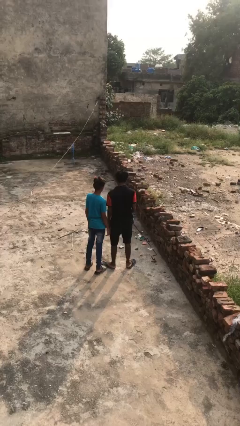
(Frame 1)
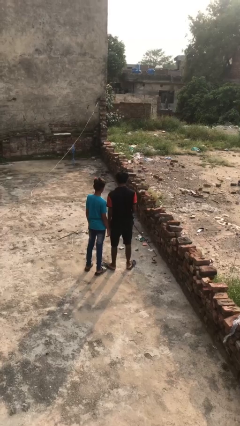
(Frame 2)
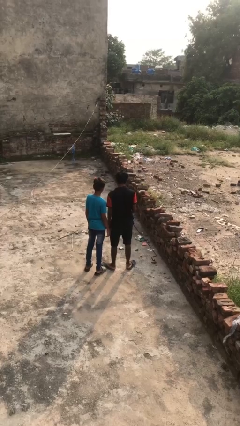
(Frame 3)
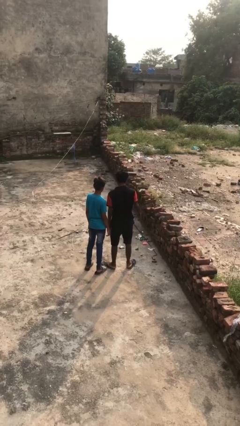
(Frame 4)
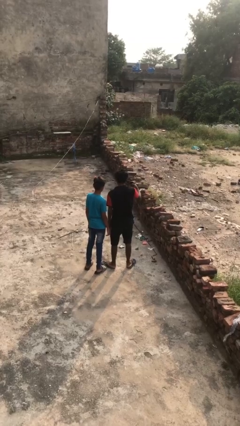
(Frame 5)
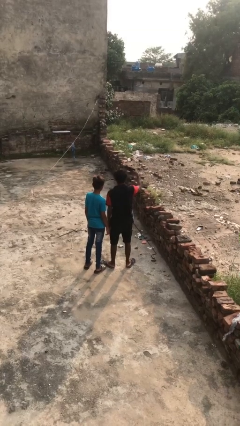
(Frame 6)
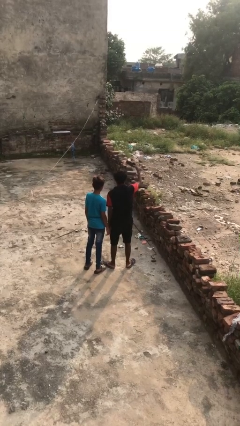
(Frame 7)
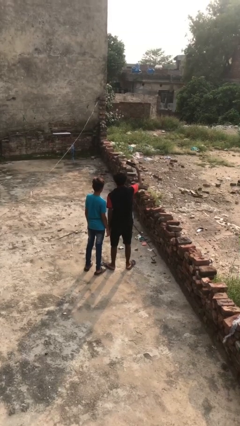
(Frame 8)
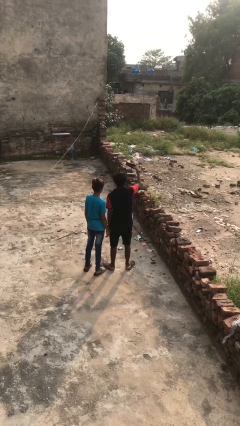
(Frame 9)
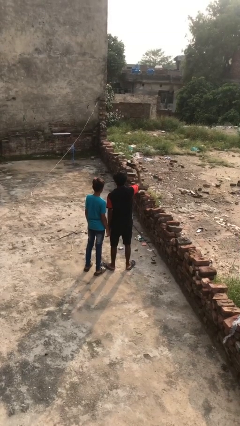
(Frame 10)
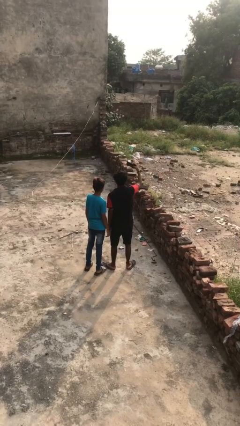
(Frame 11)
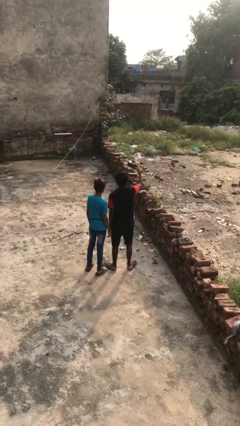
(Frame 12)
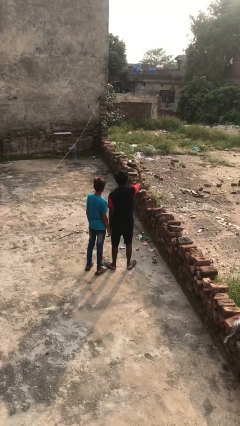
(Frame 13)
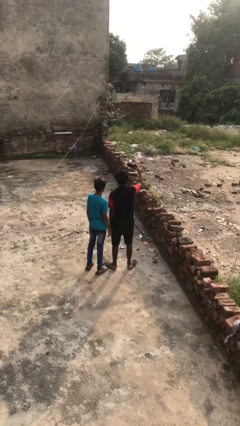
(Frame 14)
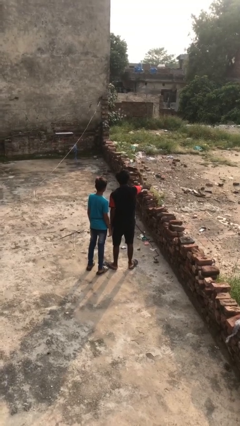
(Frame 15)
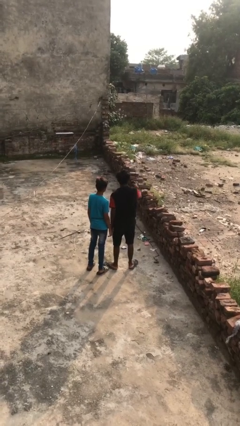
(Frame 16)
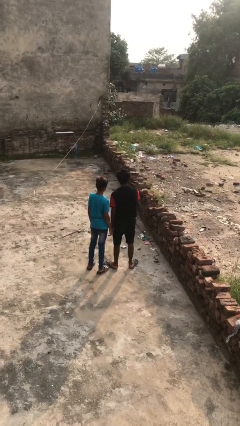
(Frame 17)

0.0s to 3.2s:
person takes selfie with person

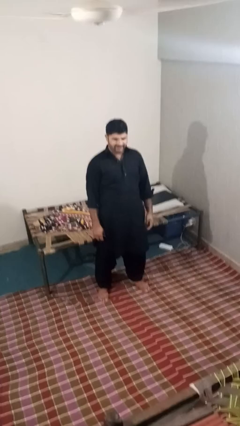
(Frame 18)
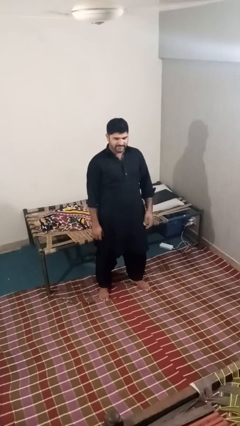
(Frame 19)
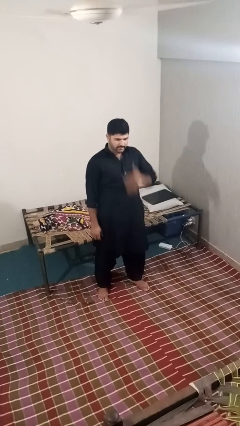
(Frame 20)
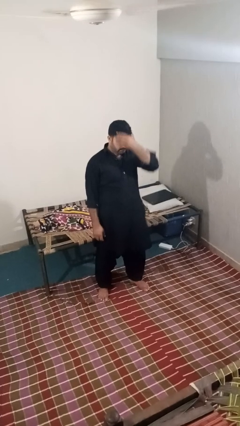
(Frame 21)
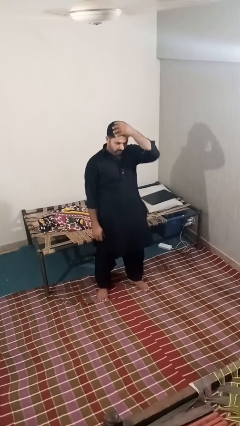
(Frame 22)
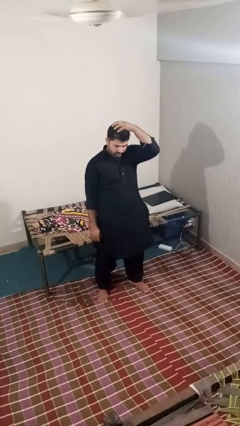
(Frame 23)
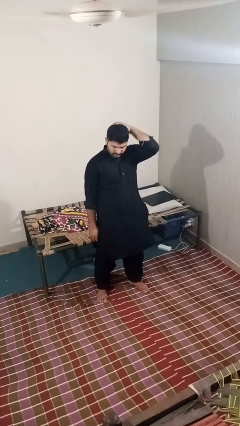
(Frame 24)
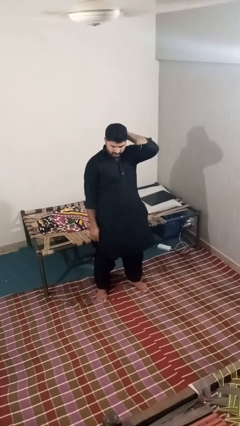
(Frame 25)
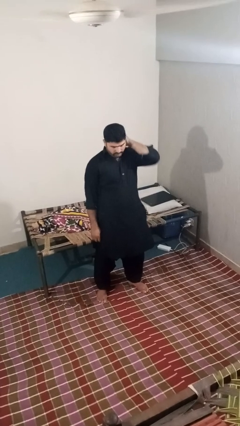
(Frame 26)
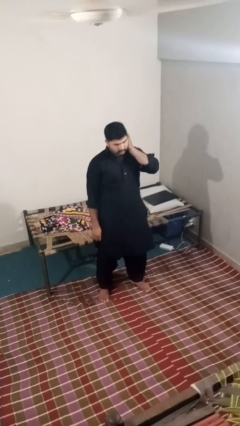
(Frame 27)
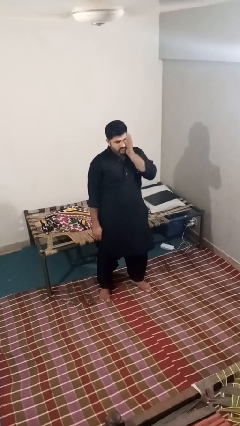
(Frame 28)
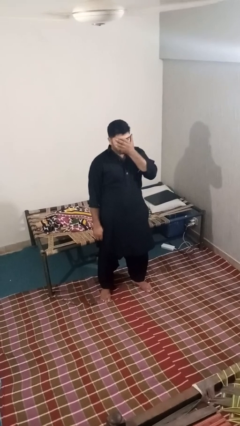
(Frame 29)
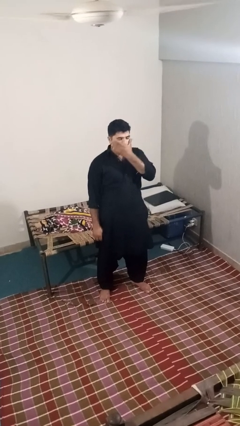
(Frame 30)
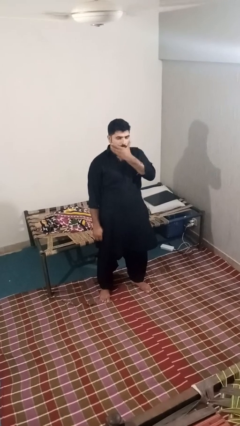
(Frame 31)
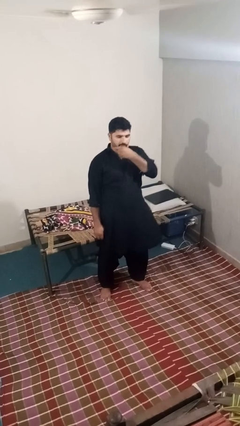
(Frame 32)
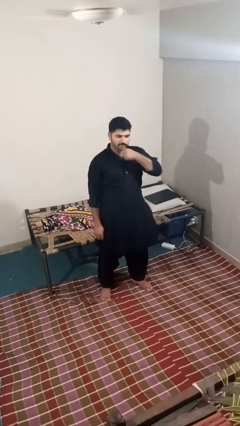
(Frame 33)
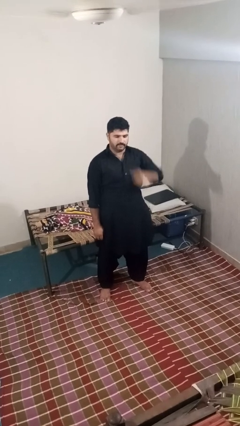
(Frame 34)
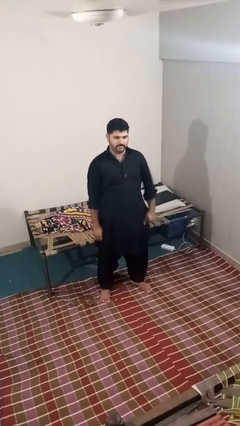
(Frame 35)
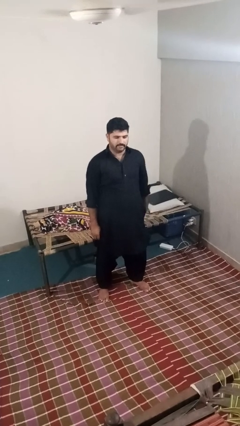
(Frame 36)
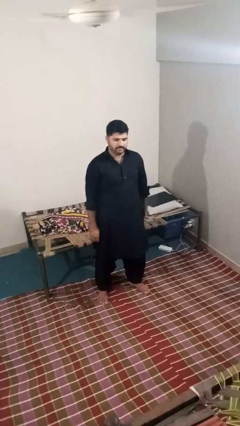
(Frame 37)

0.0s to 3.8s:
person scratches face

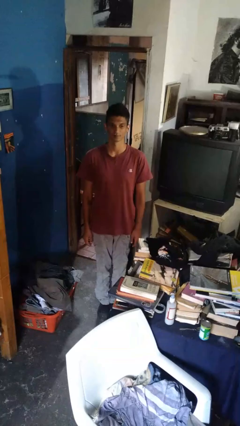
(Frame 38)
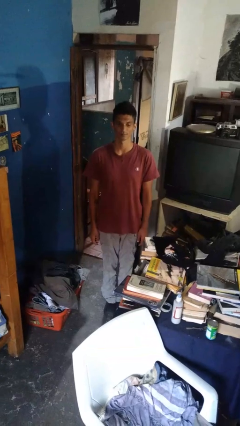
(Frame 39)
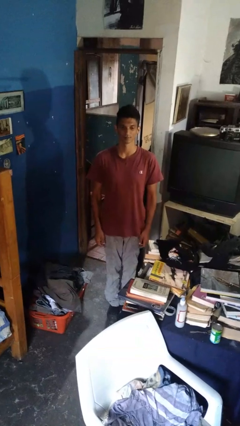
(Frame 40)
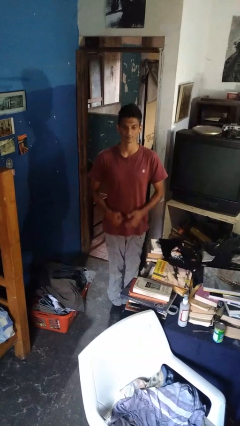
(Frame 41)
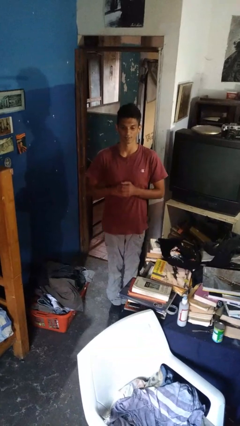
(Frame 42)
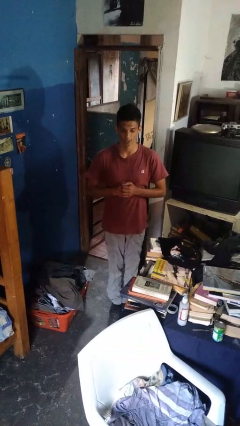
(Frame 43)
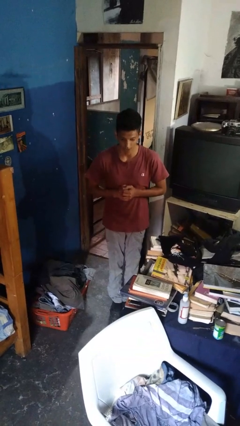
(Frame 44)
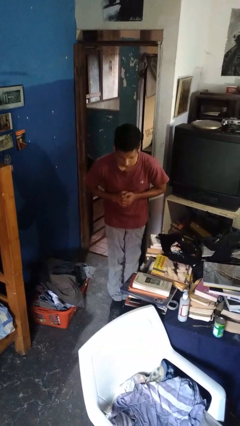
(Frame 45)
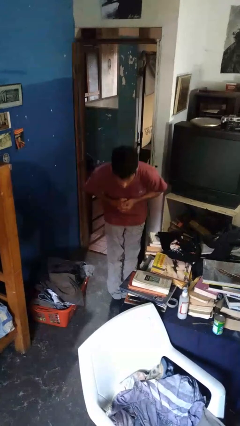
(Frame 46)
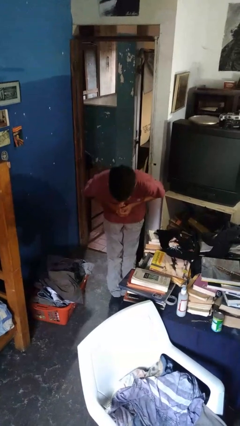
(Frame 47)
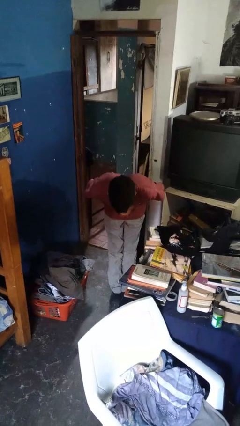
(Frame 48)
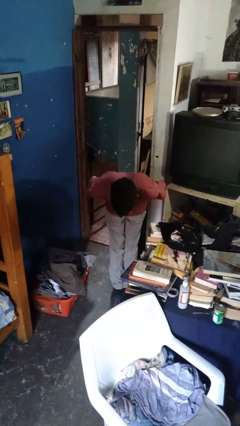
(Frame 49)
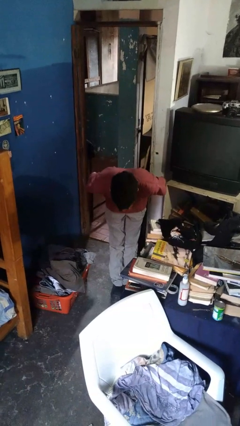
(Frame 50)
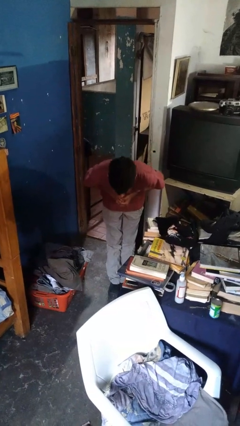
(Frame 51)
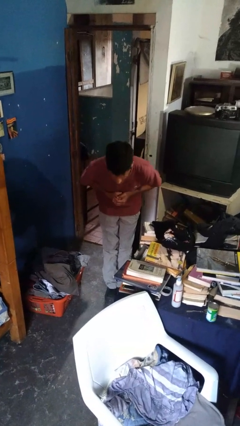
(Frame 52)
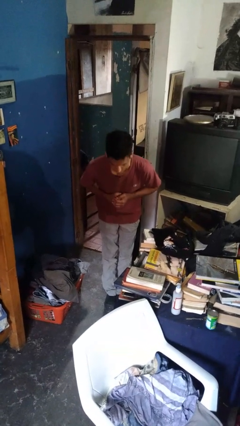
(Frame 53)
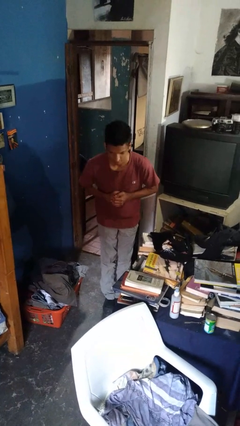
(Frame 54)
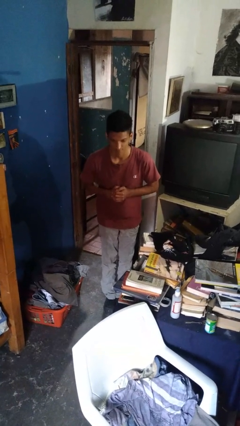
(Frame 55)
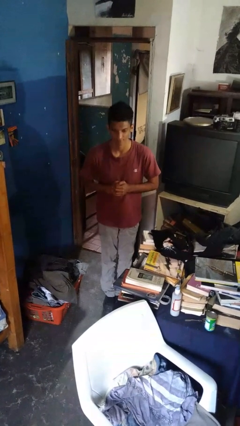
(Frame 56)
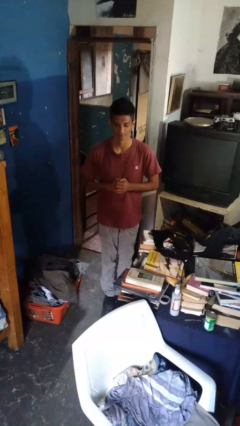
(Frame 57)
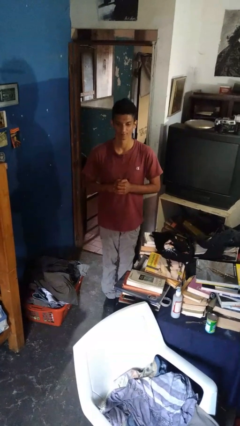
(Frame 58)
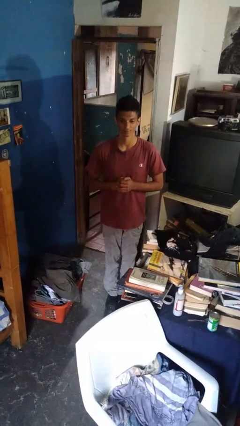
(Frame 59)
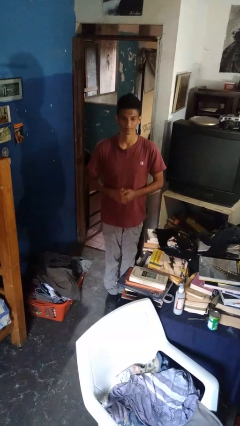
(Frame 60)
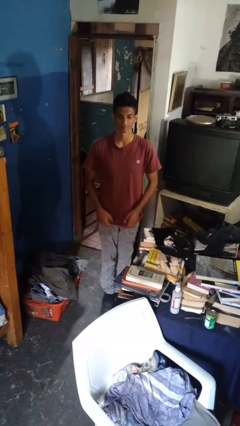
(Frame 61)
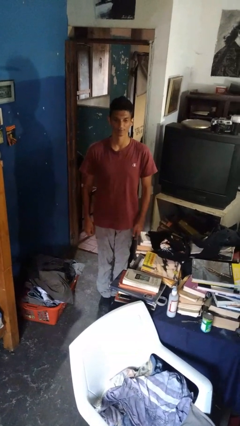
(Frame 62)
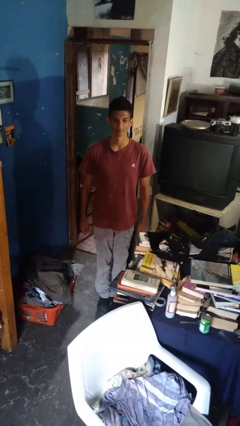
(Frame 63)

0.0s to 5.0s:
person bows

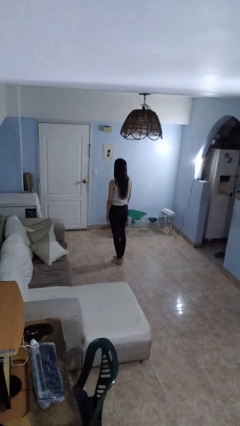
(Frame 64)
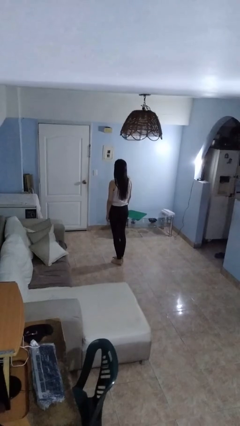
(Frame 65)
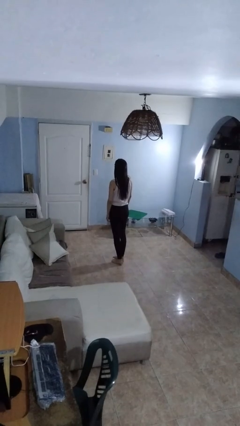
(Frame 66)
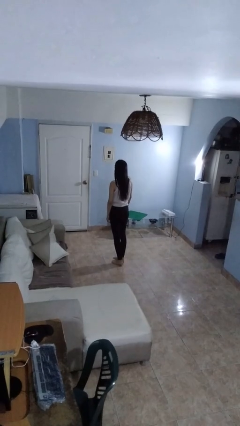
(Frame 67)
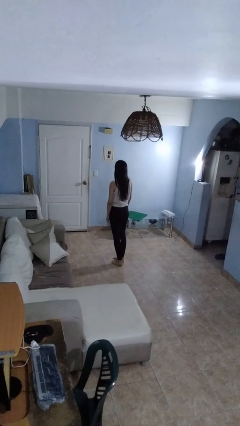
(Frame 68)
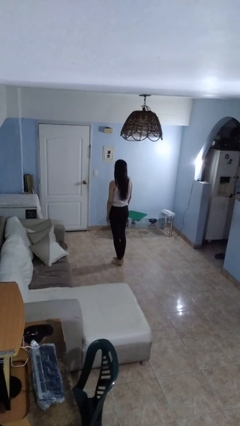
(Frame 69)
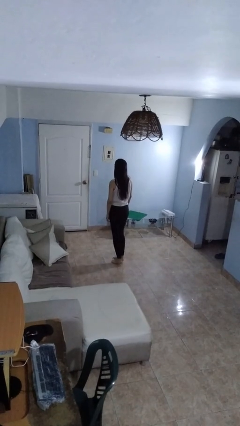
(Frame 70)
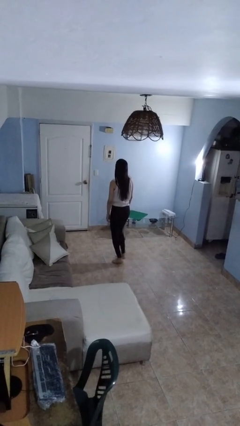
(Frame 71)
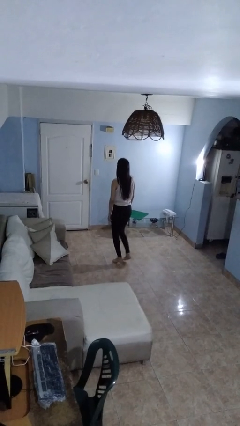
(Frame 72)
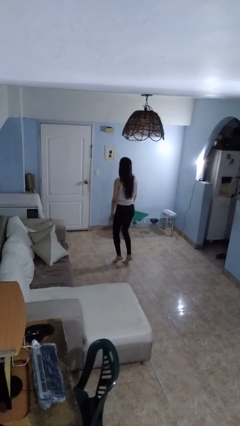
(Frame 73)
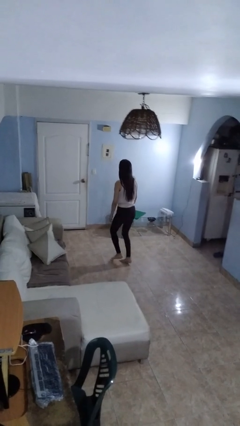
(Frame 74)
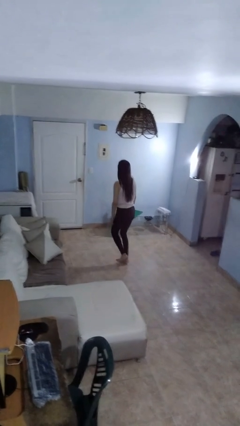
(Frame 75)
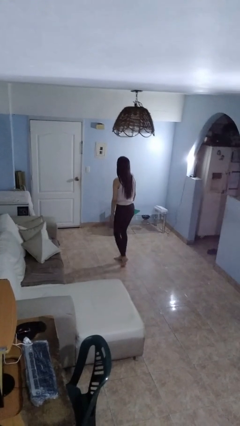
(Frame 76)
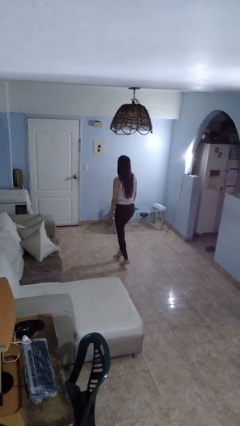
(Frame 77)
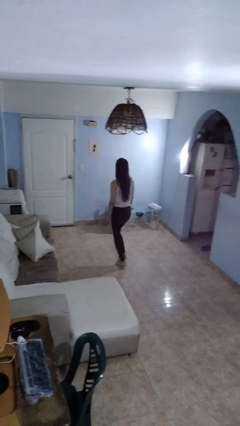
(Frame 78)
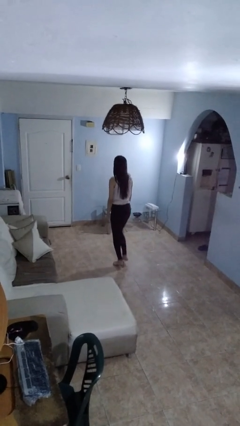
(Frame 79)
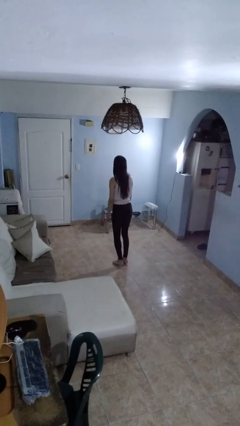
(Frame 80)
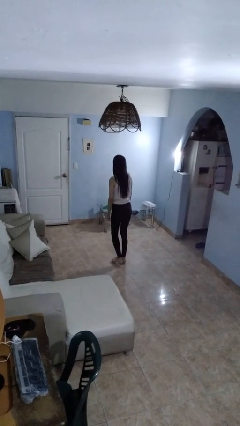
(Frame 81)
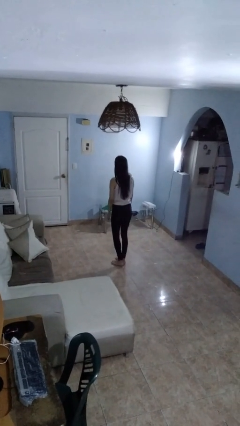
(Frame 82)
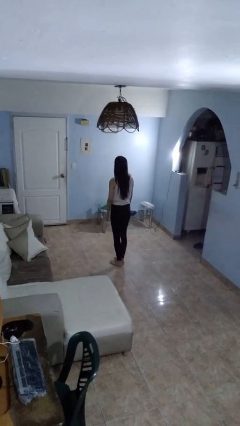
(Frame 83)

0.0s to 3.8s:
person walks tiptoe

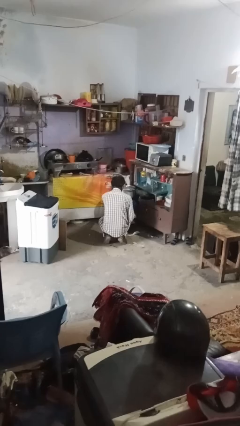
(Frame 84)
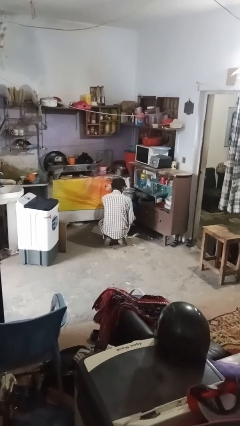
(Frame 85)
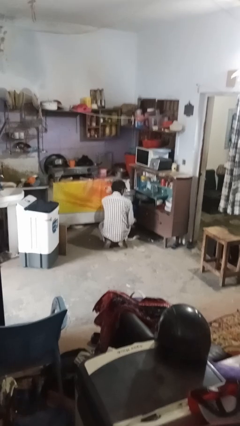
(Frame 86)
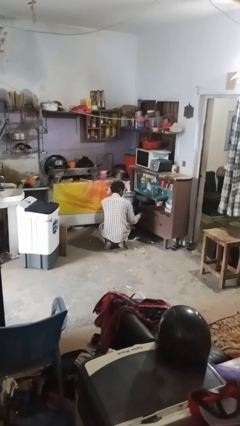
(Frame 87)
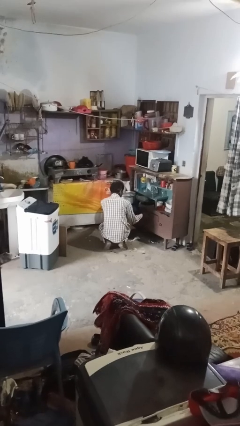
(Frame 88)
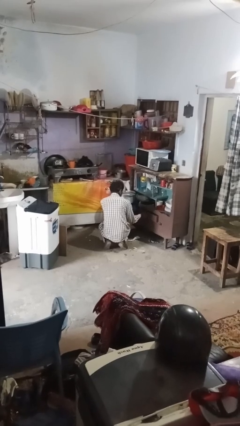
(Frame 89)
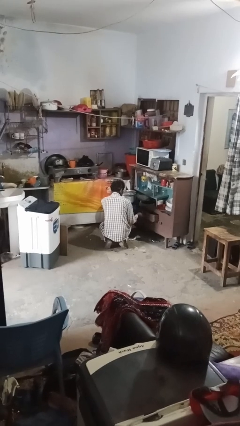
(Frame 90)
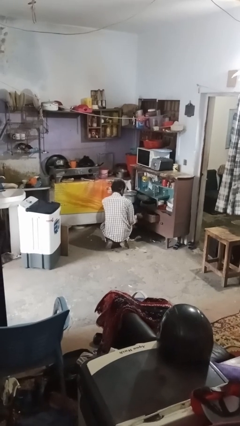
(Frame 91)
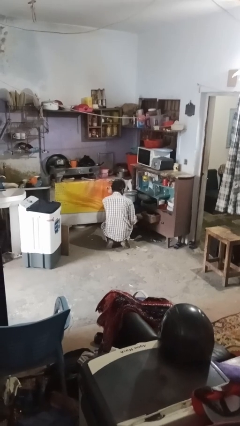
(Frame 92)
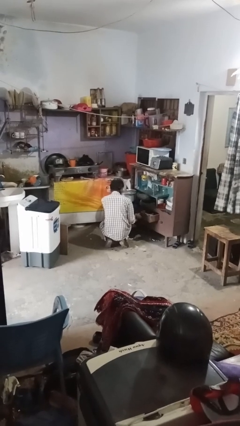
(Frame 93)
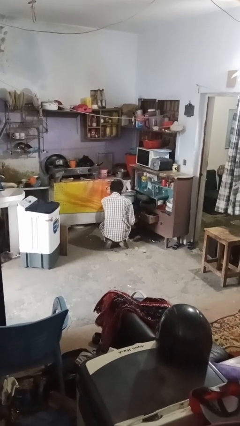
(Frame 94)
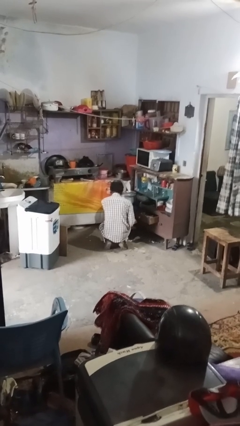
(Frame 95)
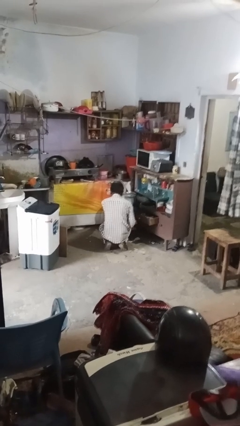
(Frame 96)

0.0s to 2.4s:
person opens kitchen drawer
